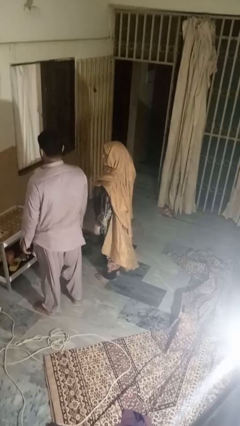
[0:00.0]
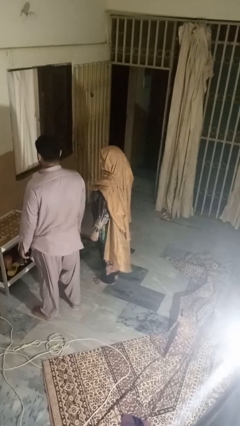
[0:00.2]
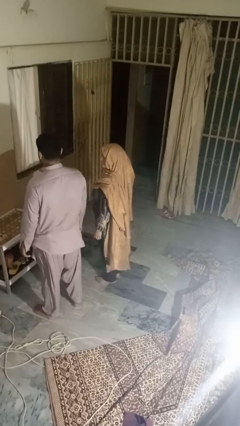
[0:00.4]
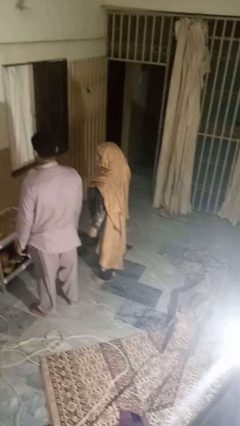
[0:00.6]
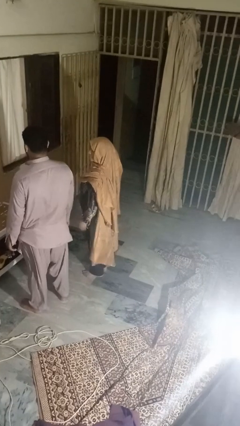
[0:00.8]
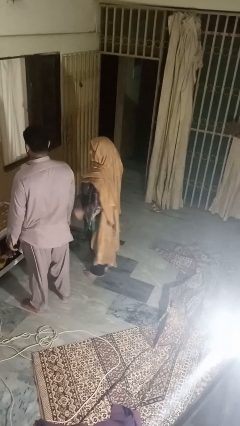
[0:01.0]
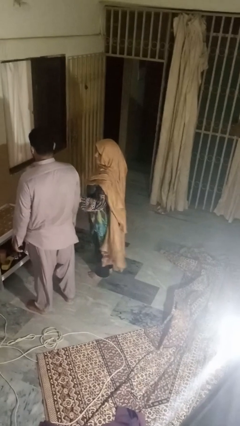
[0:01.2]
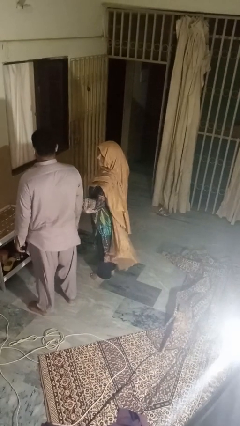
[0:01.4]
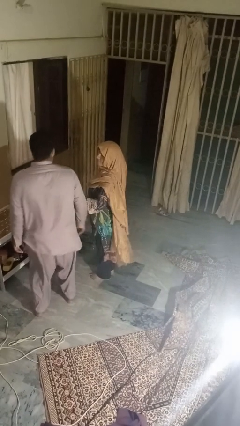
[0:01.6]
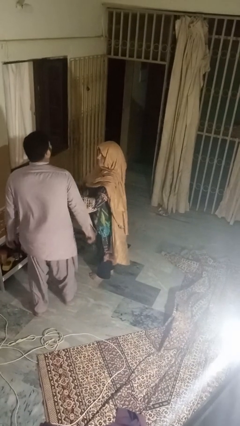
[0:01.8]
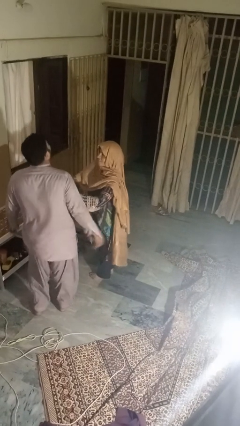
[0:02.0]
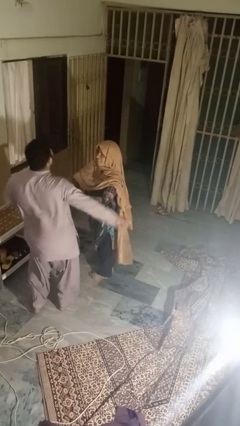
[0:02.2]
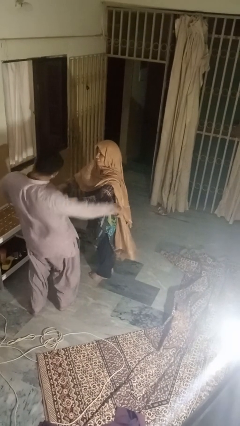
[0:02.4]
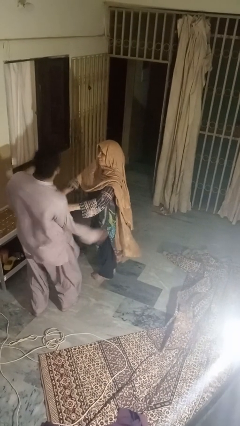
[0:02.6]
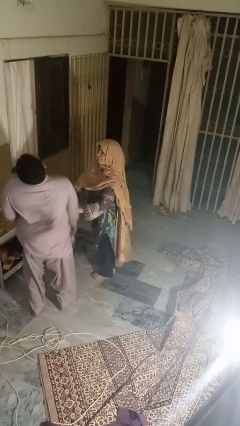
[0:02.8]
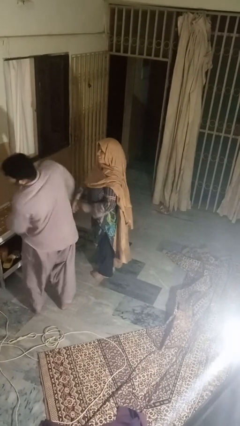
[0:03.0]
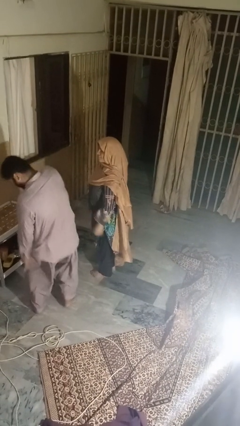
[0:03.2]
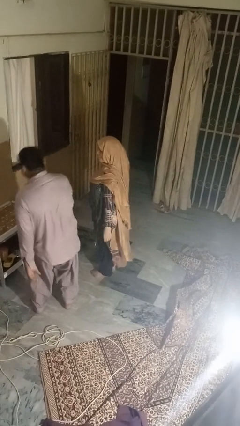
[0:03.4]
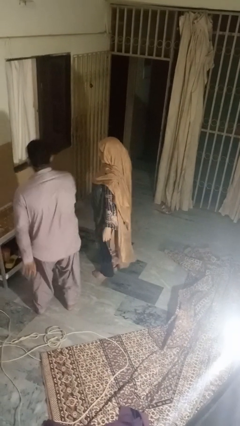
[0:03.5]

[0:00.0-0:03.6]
person tickles person

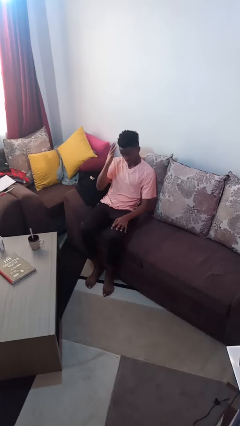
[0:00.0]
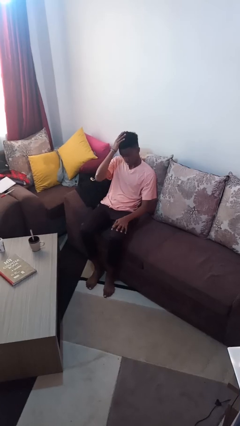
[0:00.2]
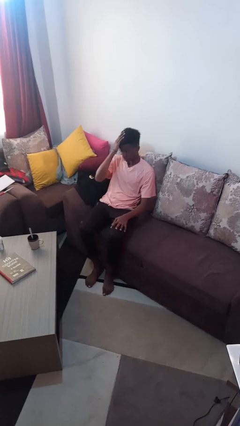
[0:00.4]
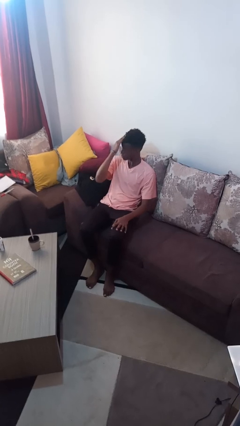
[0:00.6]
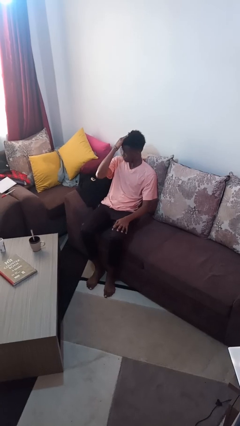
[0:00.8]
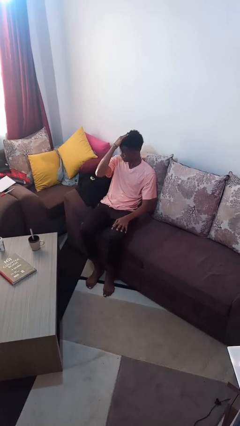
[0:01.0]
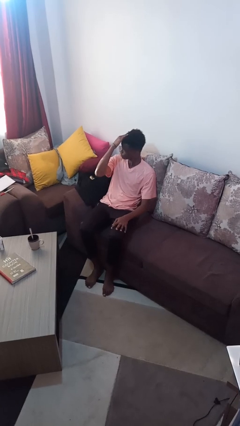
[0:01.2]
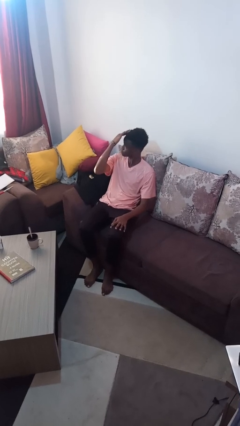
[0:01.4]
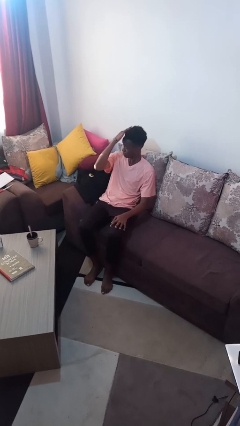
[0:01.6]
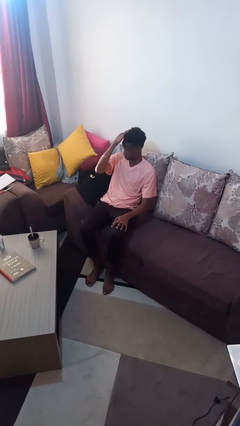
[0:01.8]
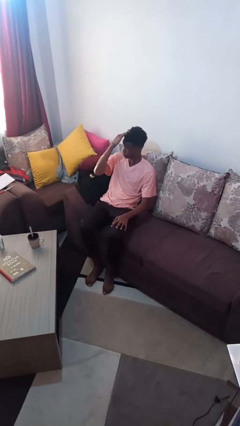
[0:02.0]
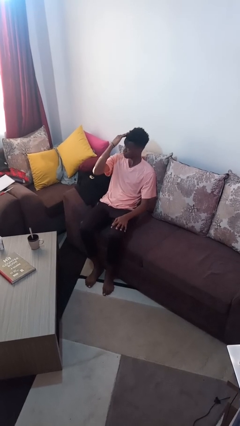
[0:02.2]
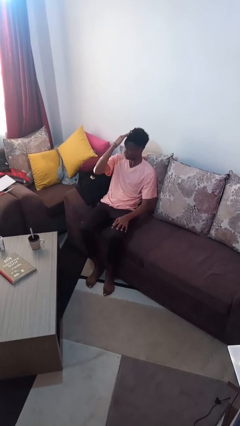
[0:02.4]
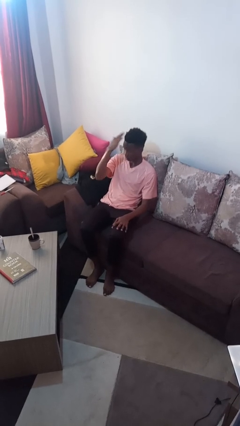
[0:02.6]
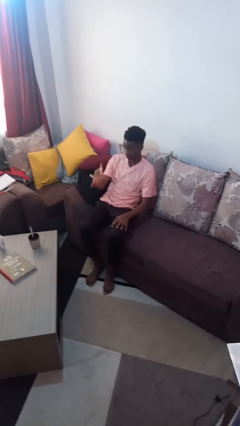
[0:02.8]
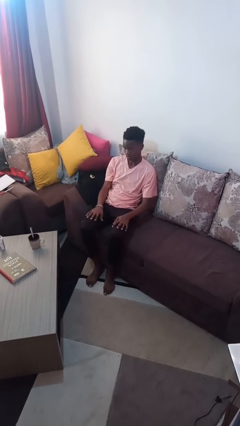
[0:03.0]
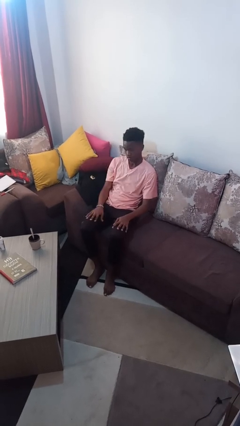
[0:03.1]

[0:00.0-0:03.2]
person strokes hair

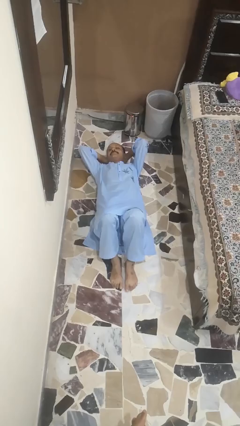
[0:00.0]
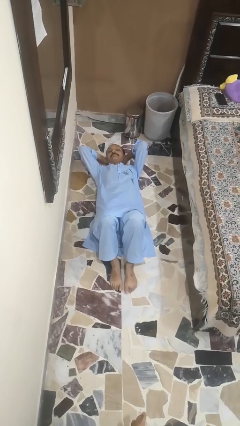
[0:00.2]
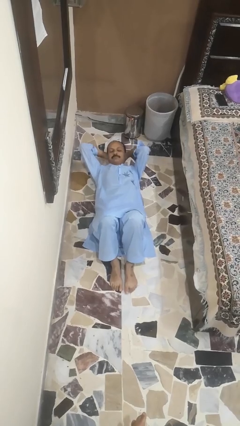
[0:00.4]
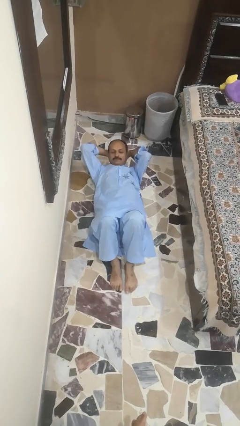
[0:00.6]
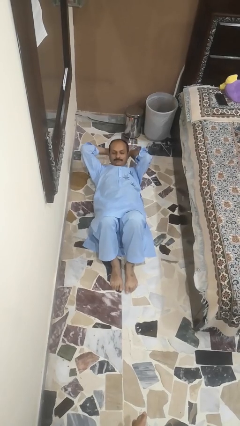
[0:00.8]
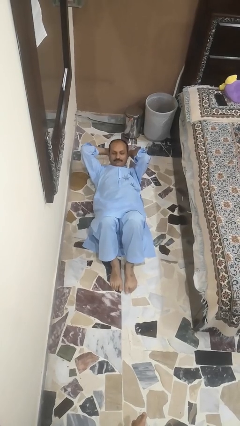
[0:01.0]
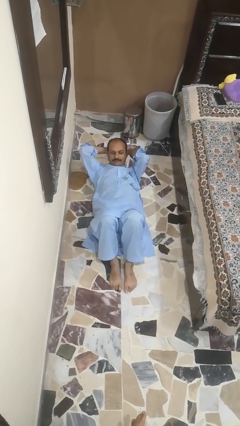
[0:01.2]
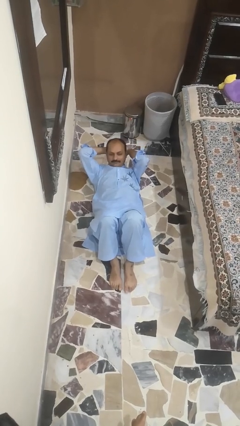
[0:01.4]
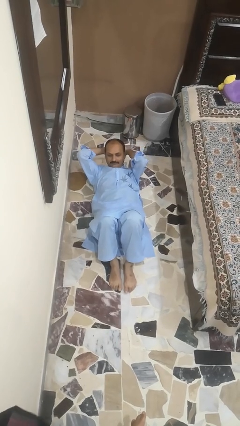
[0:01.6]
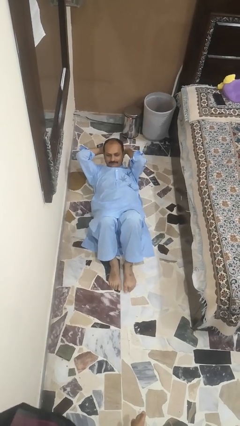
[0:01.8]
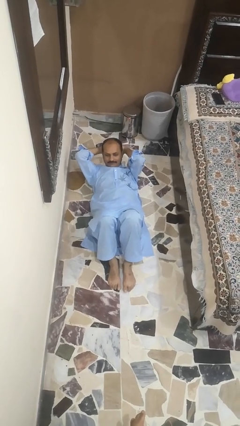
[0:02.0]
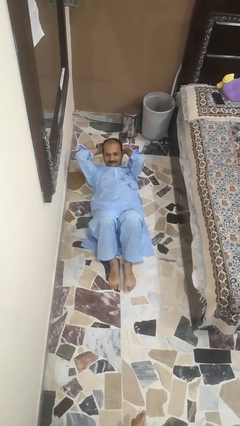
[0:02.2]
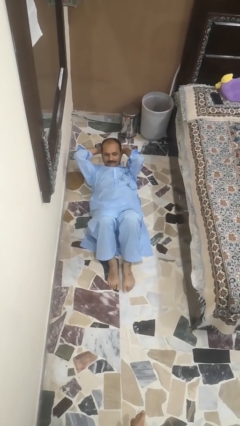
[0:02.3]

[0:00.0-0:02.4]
person exercises with situp

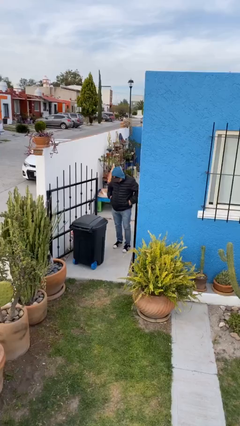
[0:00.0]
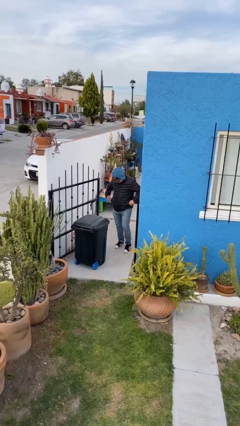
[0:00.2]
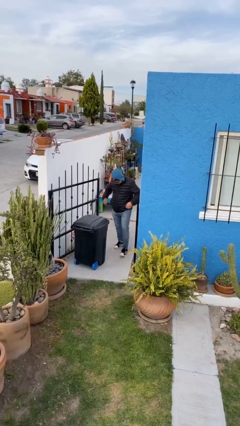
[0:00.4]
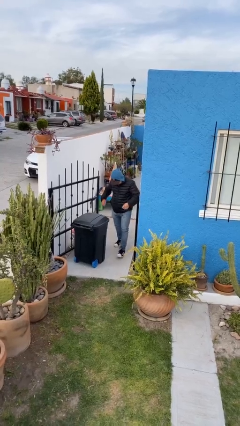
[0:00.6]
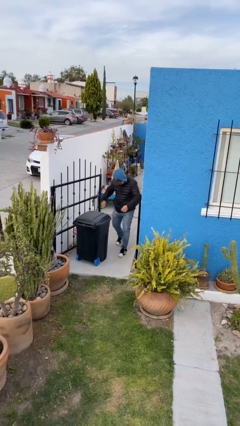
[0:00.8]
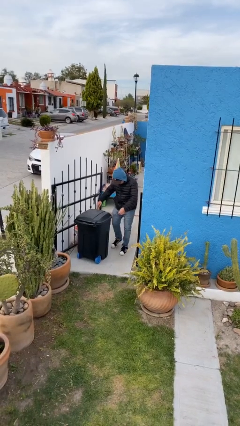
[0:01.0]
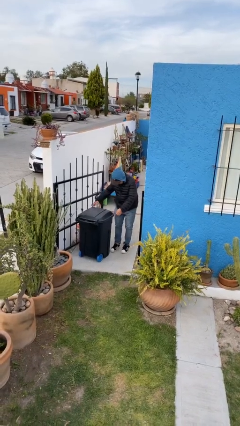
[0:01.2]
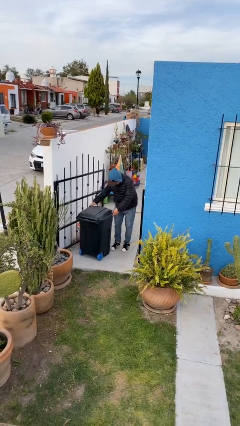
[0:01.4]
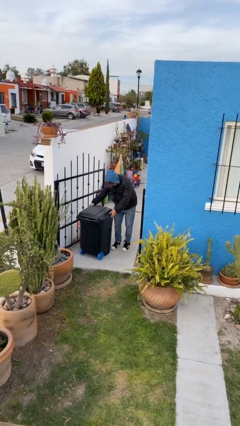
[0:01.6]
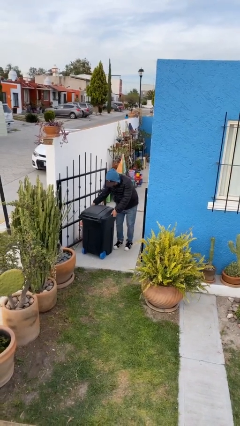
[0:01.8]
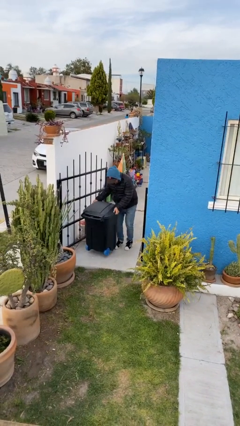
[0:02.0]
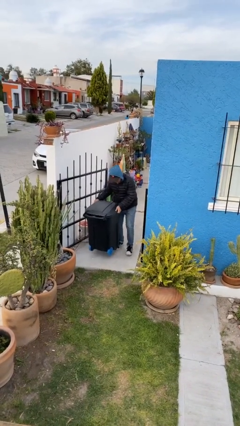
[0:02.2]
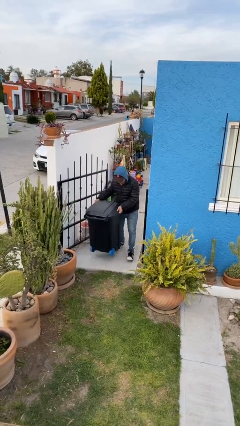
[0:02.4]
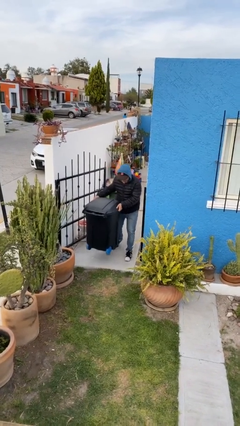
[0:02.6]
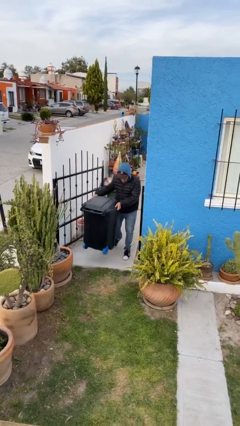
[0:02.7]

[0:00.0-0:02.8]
person picks up object from floor

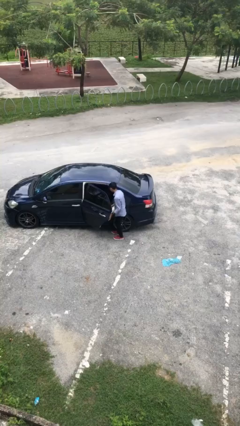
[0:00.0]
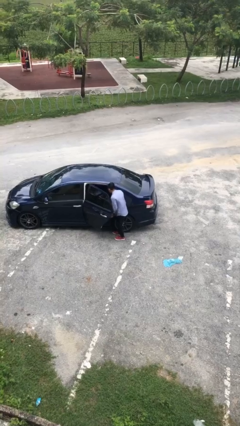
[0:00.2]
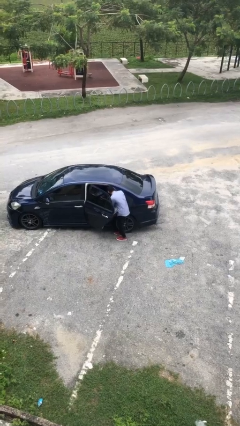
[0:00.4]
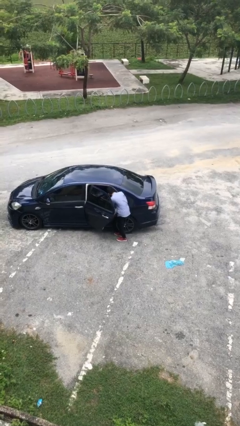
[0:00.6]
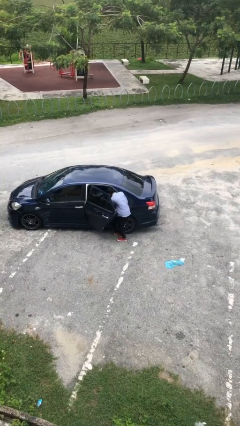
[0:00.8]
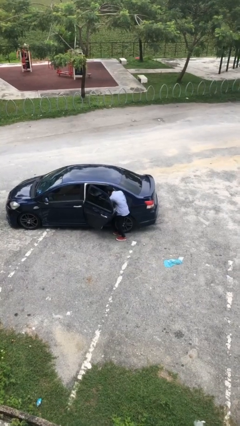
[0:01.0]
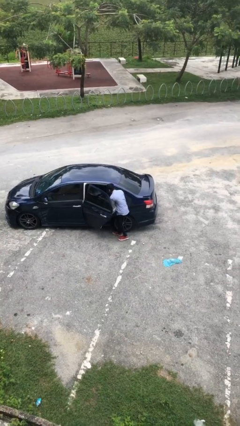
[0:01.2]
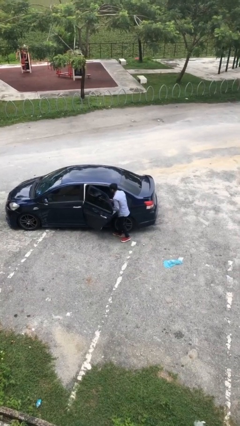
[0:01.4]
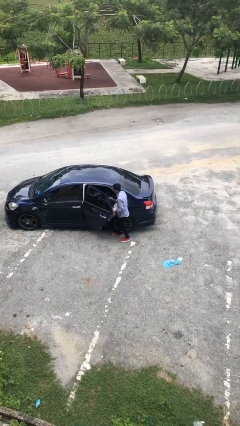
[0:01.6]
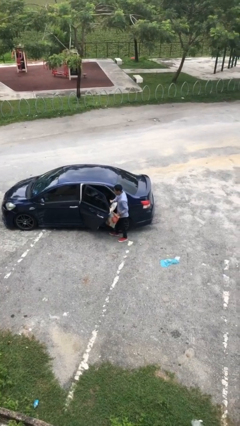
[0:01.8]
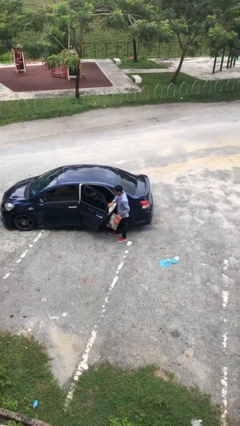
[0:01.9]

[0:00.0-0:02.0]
person unloads car

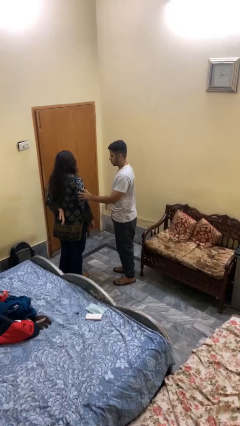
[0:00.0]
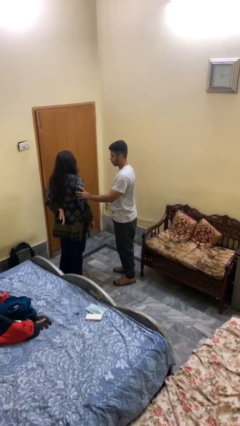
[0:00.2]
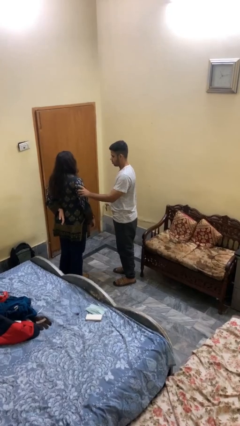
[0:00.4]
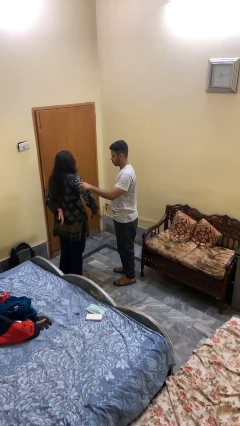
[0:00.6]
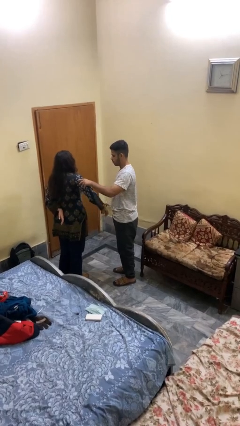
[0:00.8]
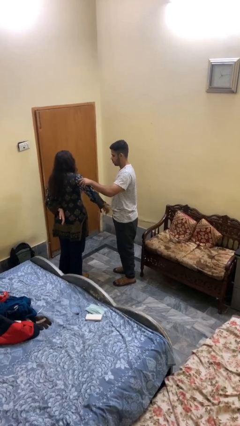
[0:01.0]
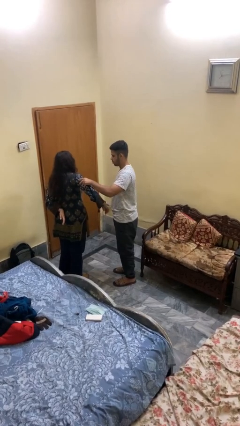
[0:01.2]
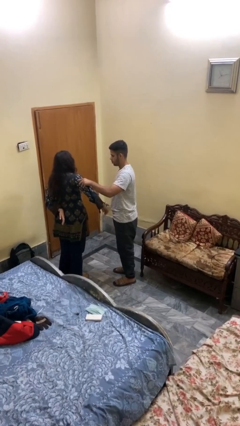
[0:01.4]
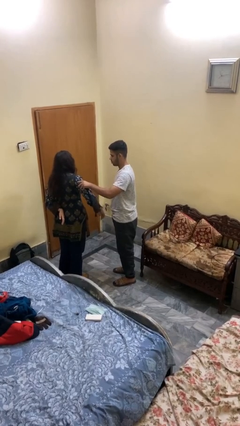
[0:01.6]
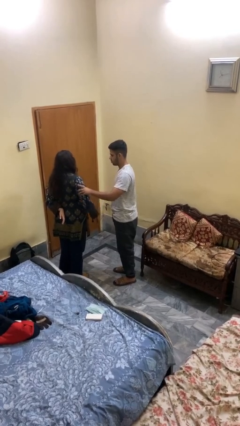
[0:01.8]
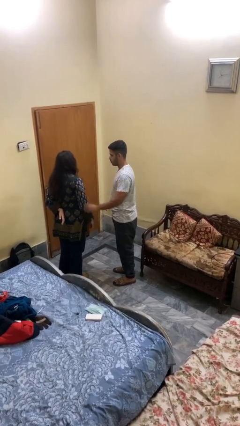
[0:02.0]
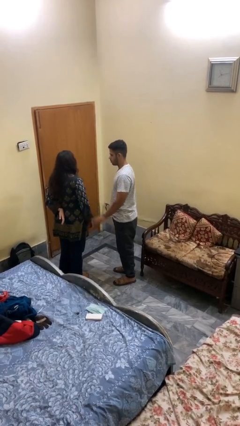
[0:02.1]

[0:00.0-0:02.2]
person grabs person by bicep

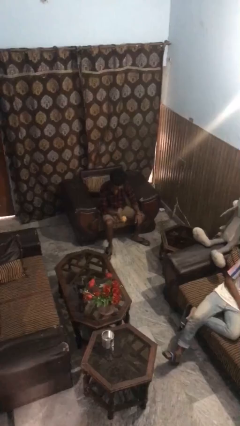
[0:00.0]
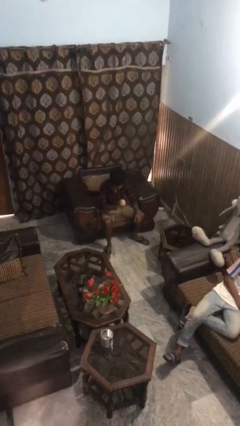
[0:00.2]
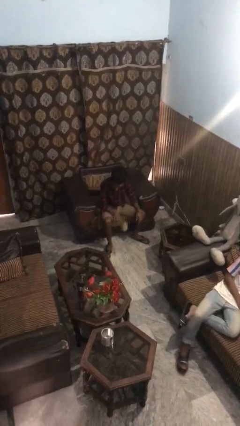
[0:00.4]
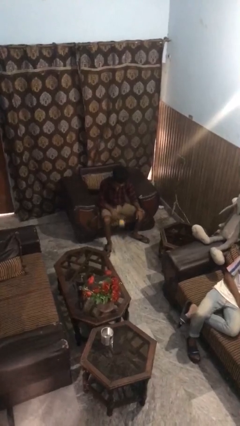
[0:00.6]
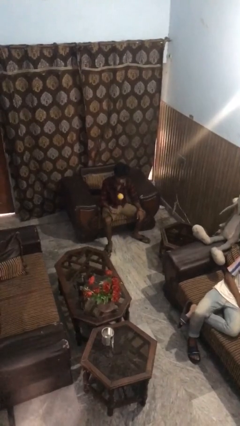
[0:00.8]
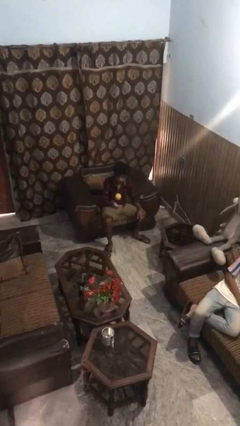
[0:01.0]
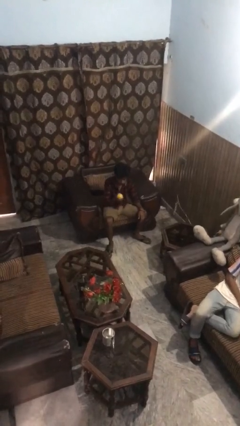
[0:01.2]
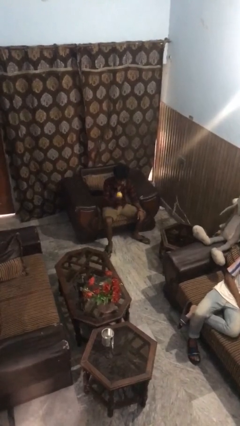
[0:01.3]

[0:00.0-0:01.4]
person bounces ball on floor
